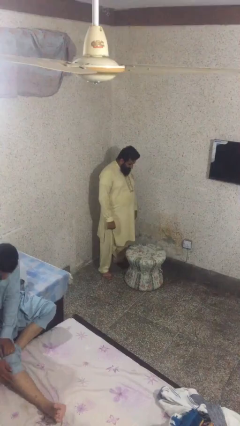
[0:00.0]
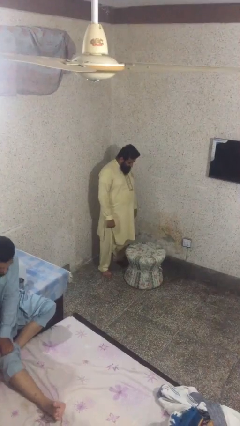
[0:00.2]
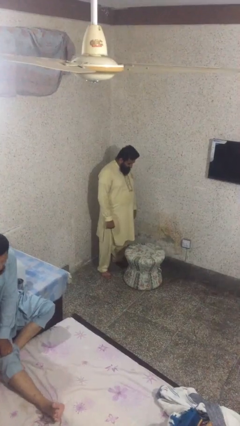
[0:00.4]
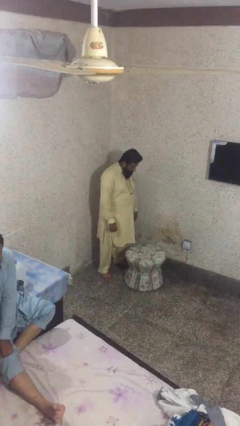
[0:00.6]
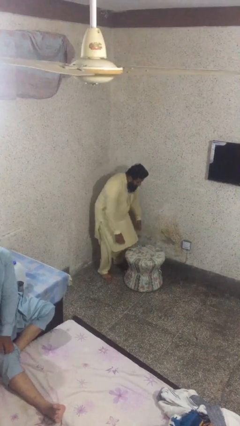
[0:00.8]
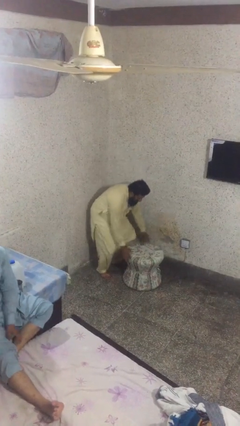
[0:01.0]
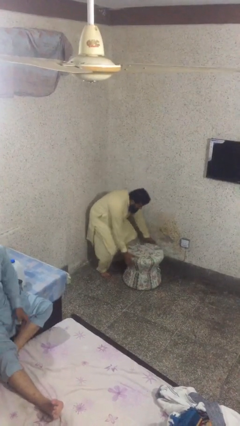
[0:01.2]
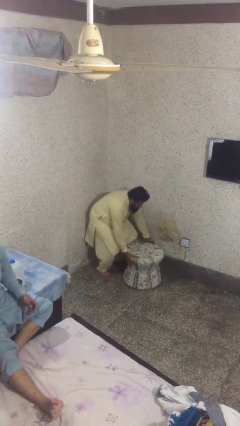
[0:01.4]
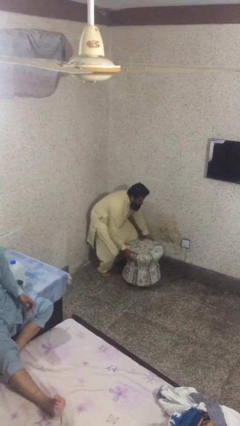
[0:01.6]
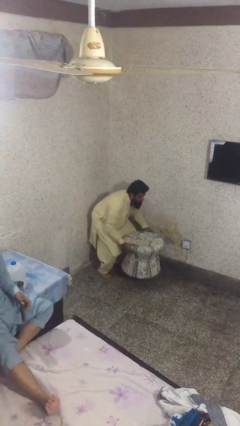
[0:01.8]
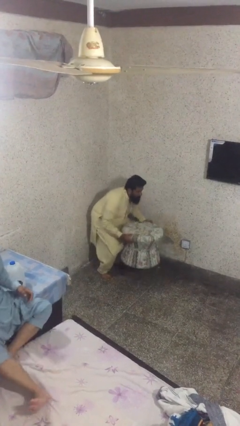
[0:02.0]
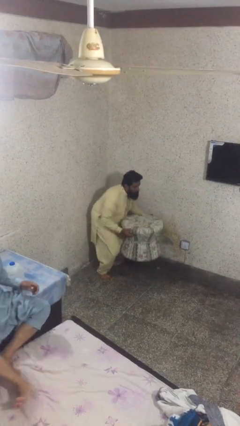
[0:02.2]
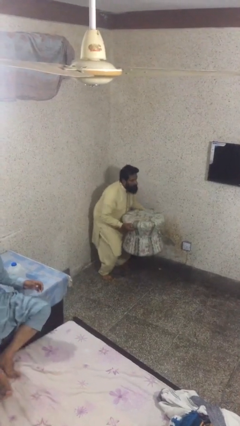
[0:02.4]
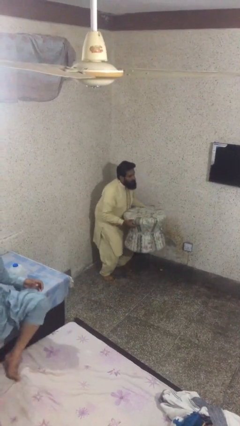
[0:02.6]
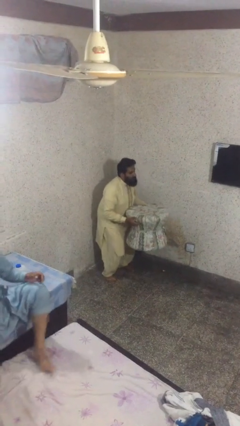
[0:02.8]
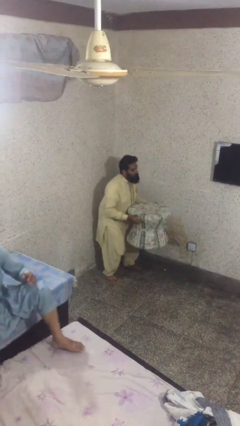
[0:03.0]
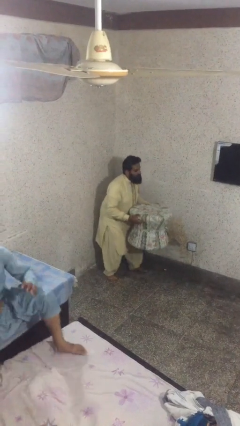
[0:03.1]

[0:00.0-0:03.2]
person picks up object from floor

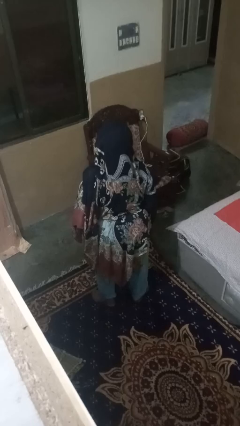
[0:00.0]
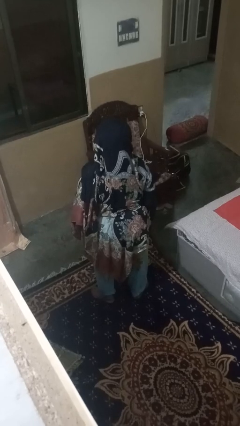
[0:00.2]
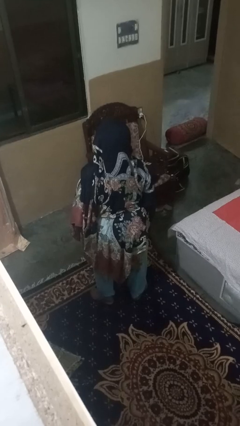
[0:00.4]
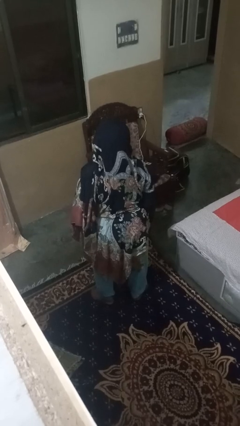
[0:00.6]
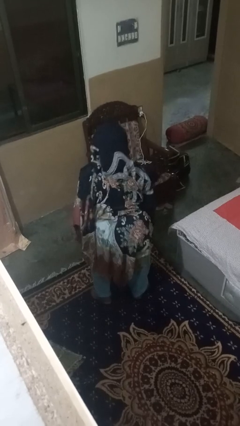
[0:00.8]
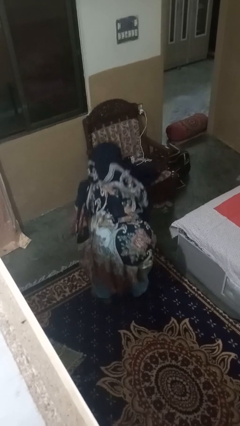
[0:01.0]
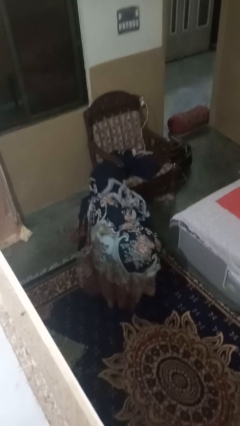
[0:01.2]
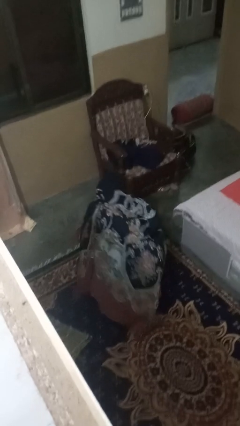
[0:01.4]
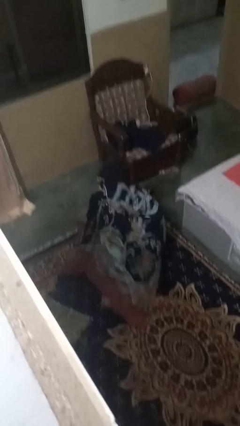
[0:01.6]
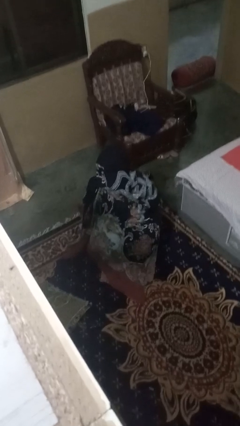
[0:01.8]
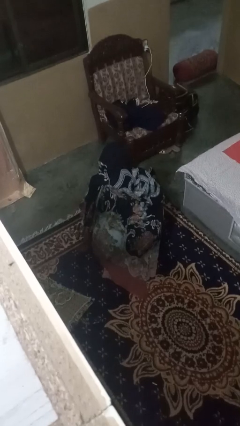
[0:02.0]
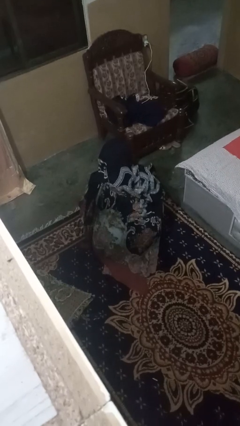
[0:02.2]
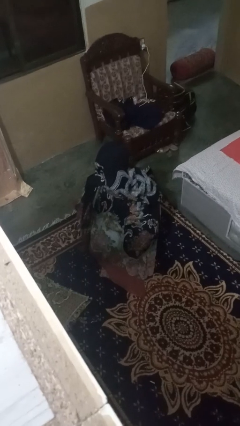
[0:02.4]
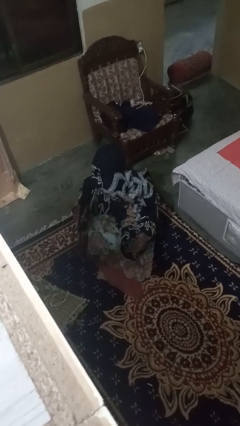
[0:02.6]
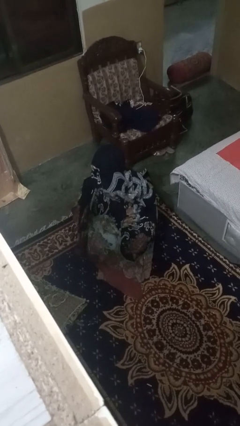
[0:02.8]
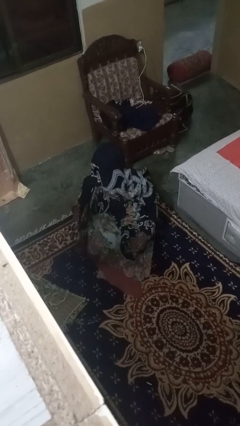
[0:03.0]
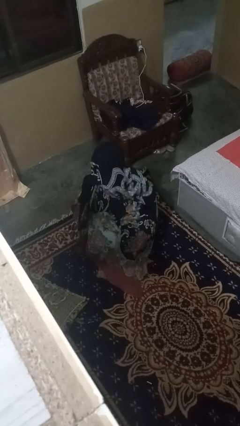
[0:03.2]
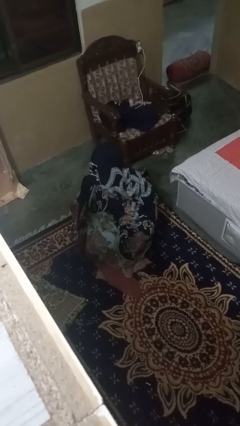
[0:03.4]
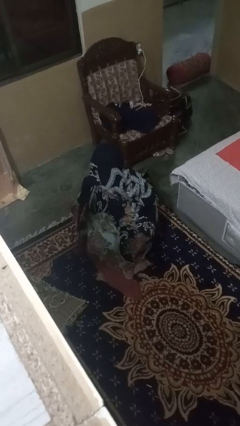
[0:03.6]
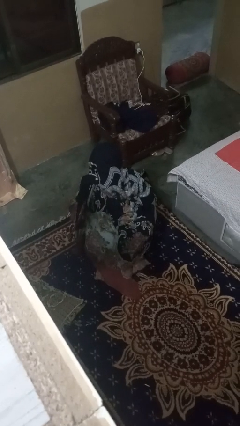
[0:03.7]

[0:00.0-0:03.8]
person squats

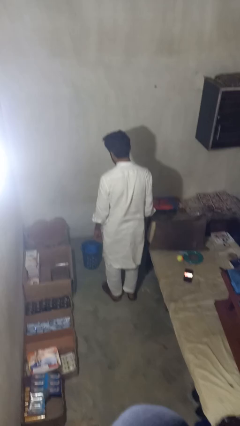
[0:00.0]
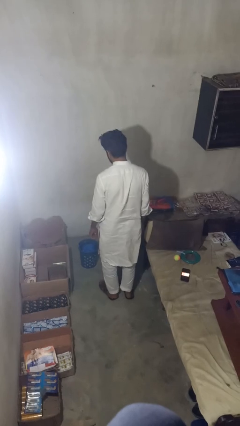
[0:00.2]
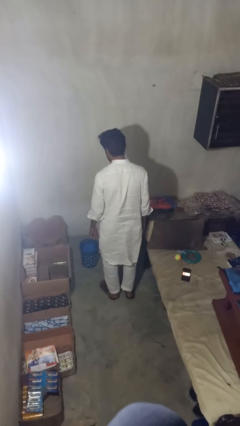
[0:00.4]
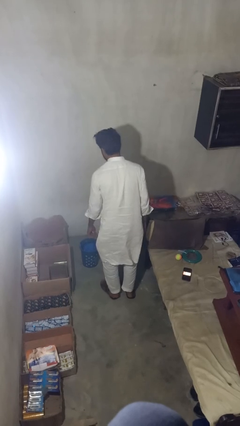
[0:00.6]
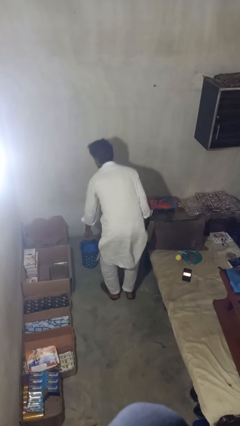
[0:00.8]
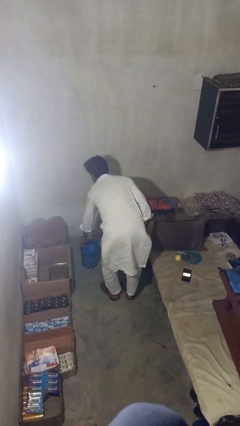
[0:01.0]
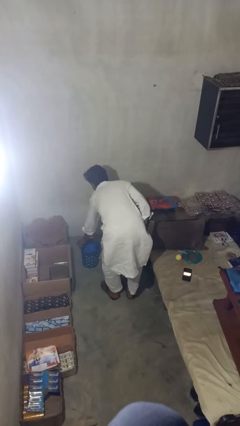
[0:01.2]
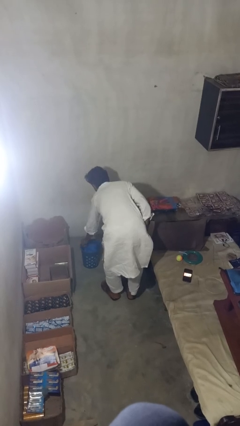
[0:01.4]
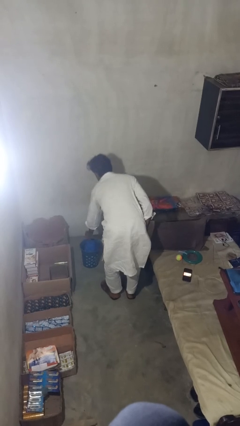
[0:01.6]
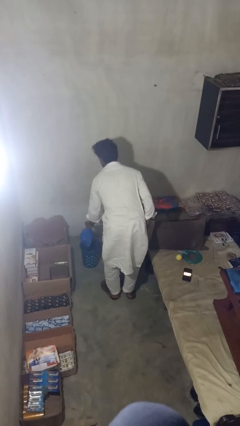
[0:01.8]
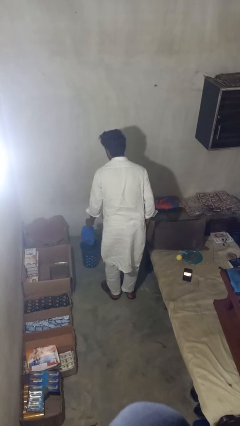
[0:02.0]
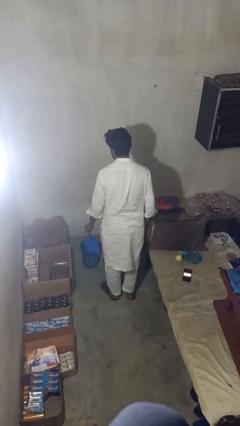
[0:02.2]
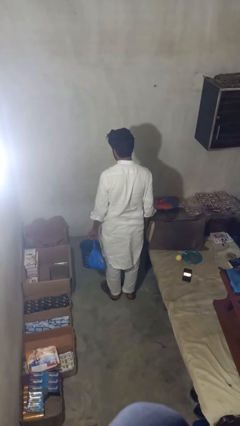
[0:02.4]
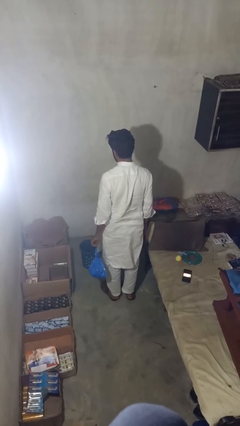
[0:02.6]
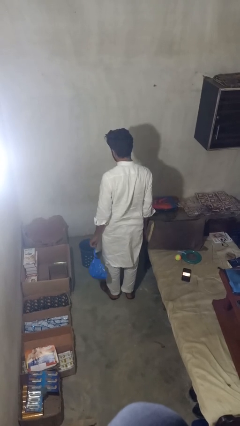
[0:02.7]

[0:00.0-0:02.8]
person takes object from basket

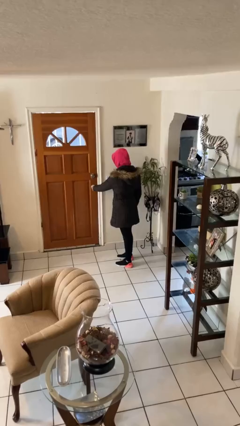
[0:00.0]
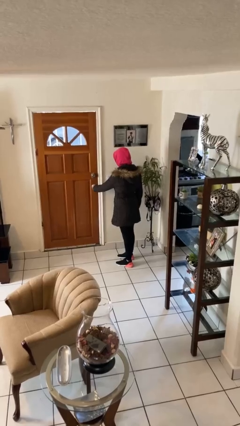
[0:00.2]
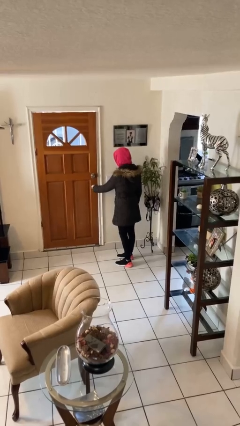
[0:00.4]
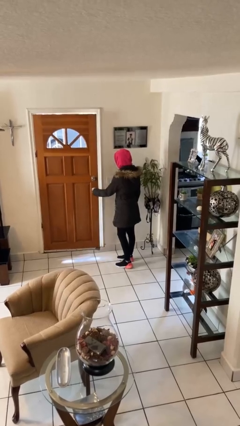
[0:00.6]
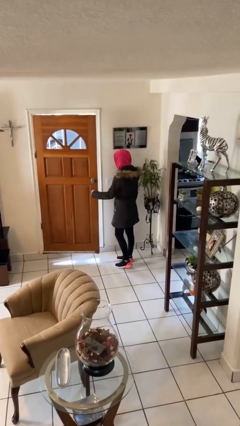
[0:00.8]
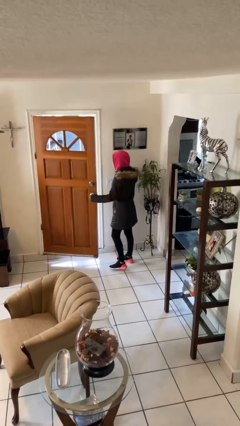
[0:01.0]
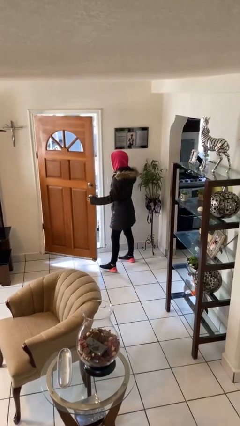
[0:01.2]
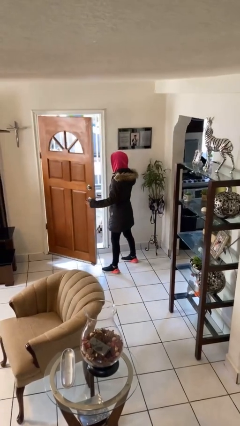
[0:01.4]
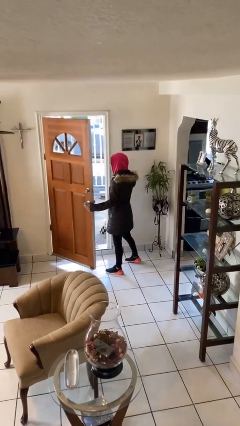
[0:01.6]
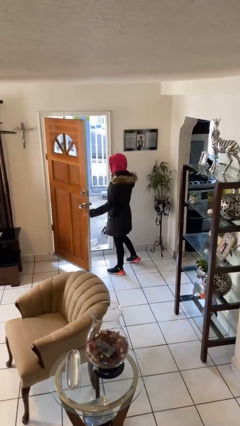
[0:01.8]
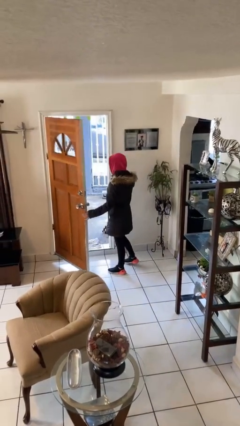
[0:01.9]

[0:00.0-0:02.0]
person opens facility door

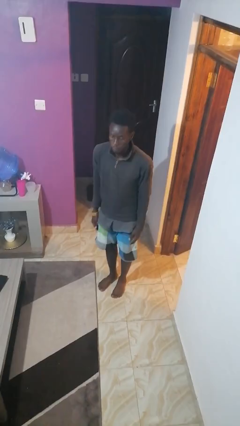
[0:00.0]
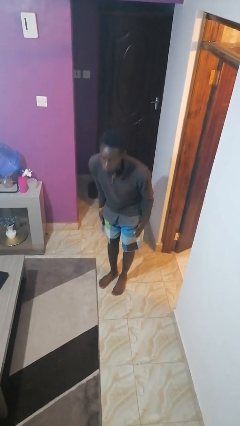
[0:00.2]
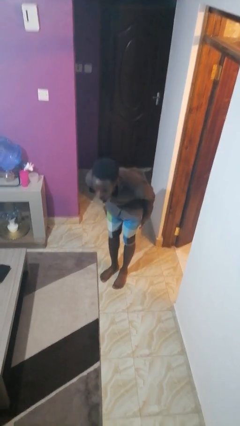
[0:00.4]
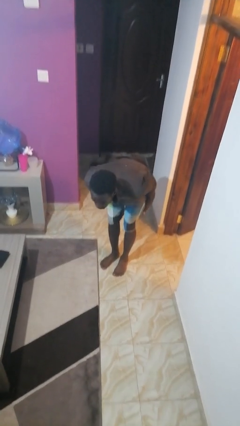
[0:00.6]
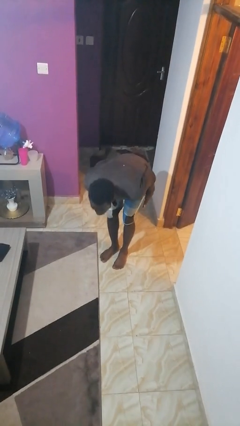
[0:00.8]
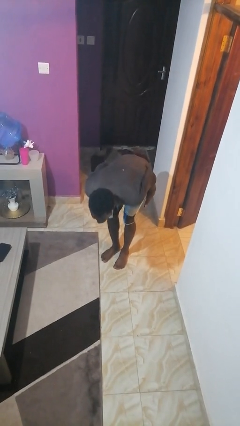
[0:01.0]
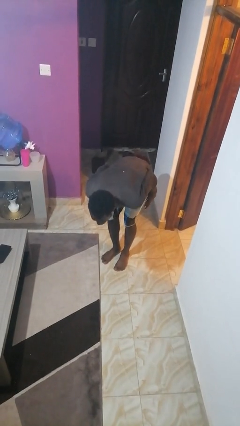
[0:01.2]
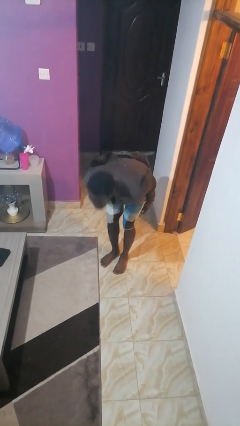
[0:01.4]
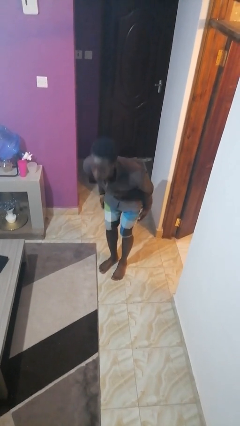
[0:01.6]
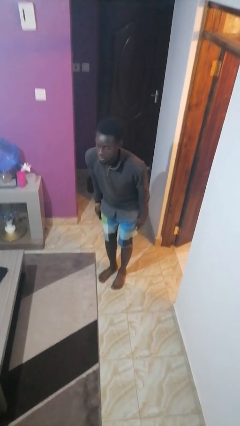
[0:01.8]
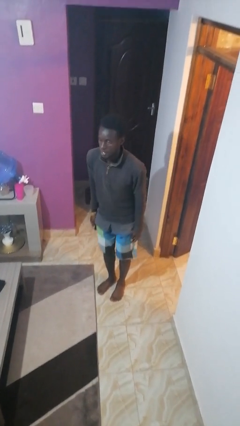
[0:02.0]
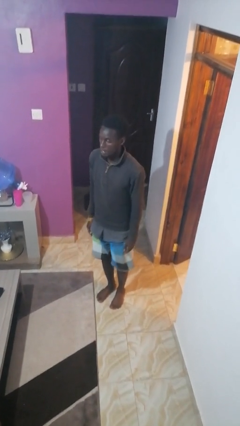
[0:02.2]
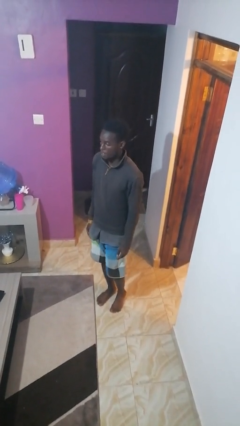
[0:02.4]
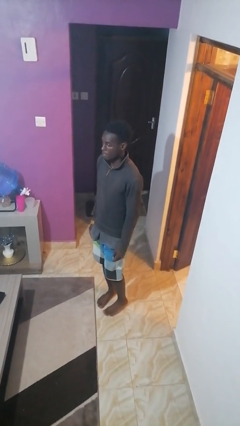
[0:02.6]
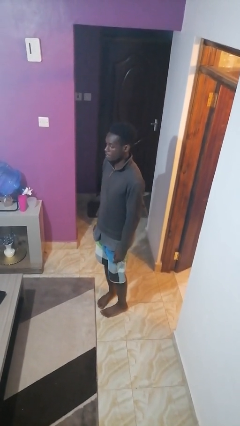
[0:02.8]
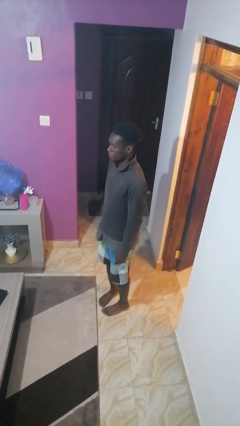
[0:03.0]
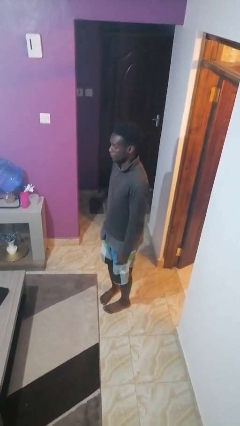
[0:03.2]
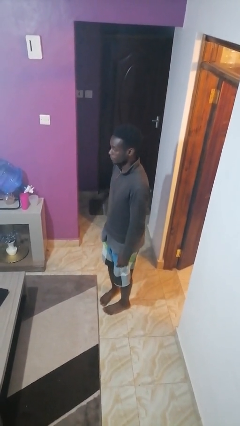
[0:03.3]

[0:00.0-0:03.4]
person bows

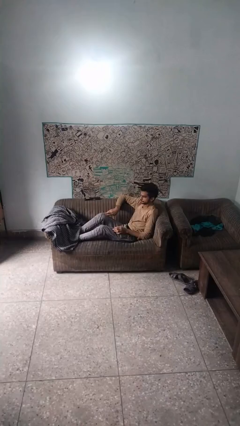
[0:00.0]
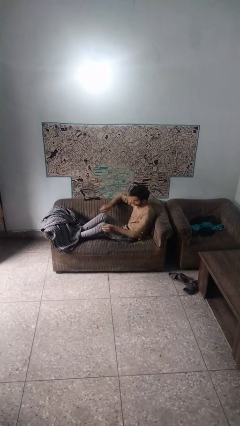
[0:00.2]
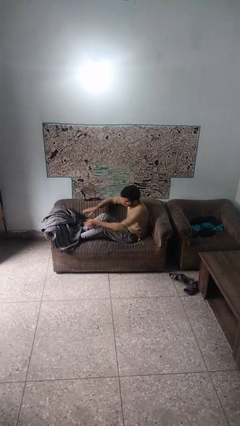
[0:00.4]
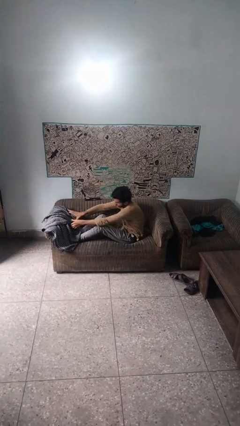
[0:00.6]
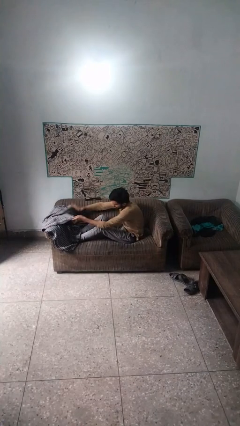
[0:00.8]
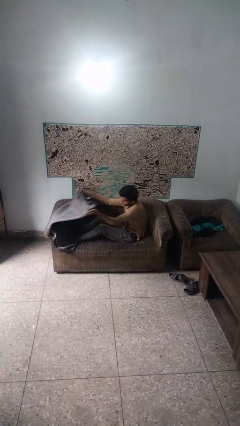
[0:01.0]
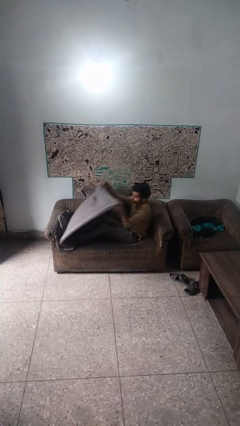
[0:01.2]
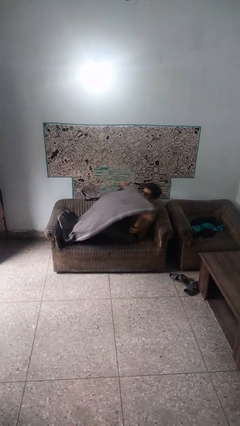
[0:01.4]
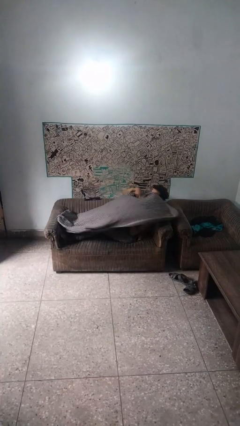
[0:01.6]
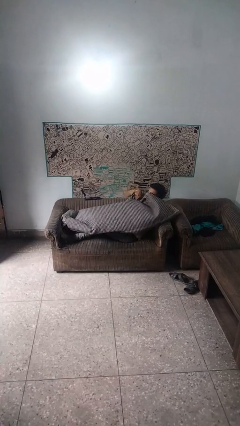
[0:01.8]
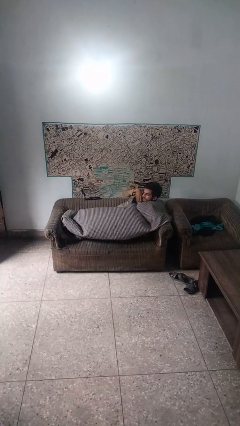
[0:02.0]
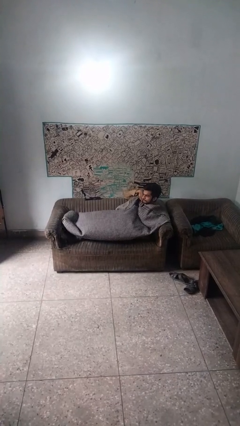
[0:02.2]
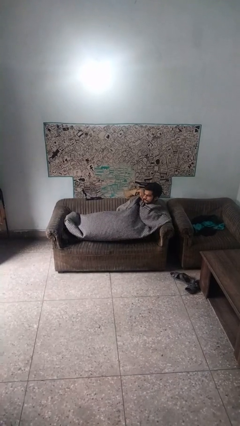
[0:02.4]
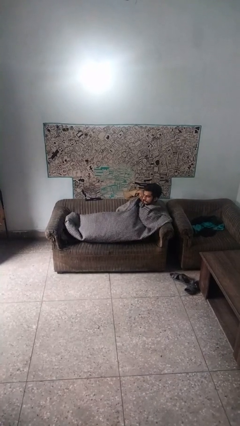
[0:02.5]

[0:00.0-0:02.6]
person covers with blanket
